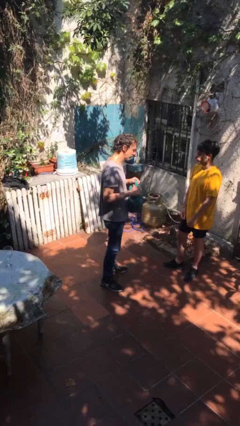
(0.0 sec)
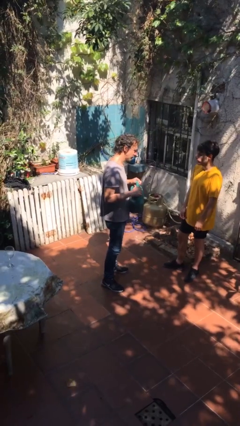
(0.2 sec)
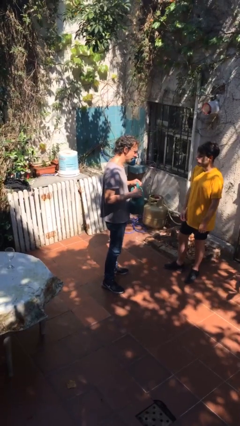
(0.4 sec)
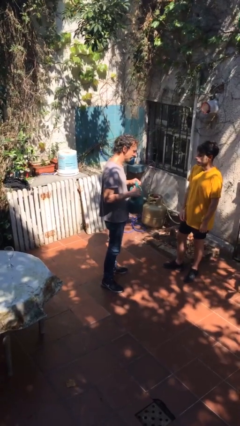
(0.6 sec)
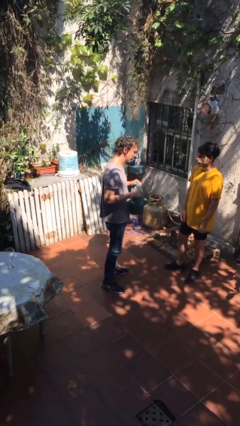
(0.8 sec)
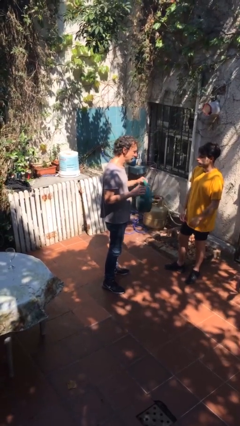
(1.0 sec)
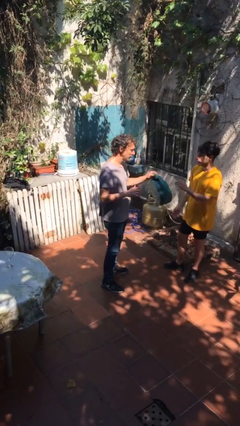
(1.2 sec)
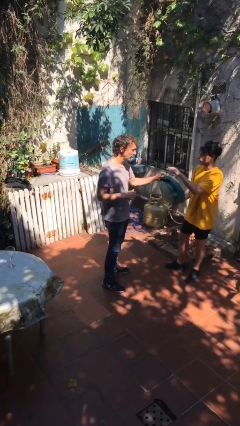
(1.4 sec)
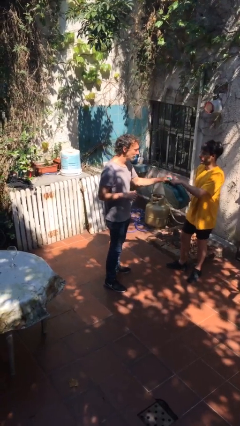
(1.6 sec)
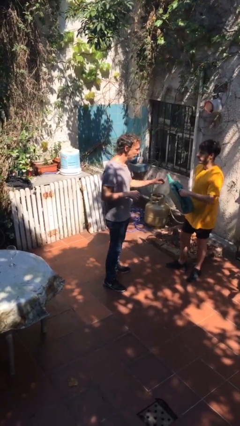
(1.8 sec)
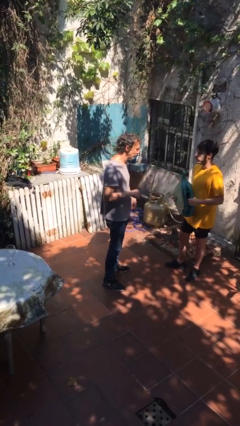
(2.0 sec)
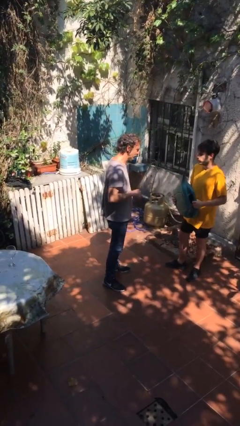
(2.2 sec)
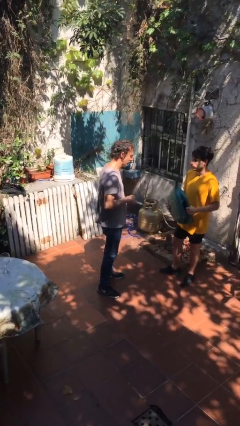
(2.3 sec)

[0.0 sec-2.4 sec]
person transfers object to person

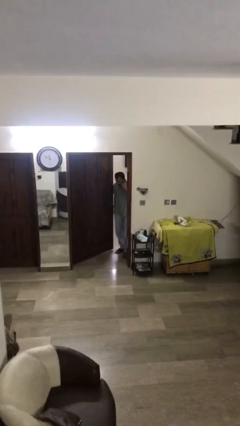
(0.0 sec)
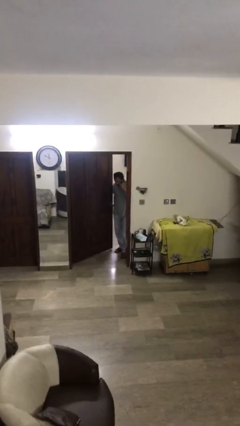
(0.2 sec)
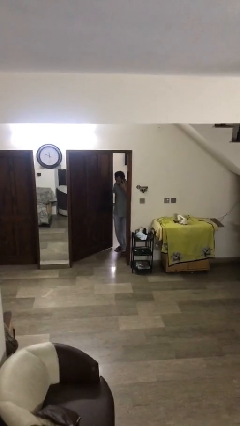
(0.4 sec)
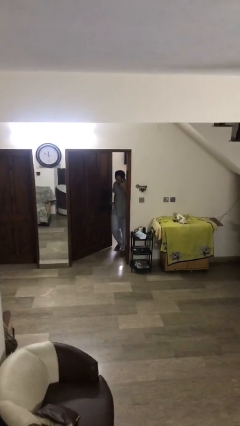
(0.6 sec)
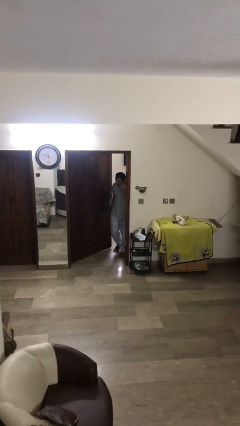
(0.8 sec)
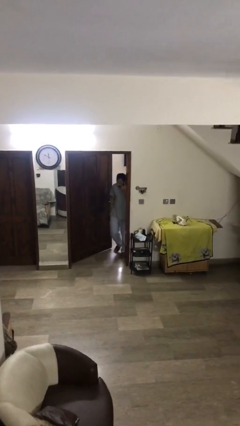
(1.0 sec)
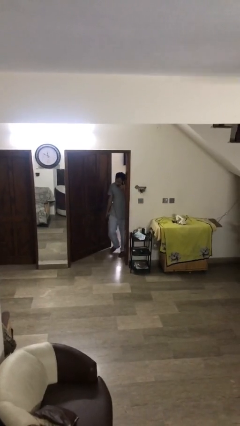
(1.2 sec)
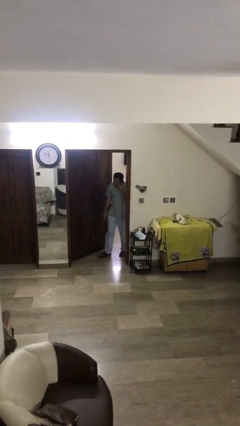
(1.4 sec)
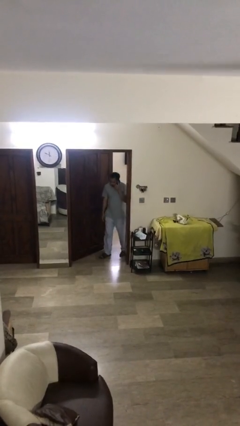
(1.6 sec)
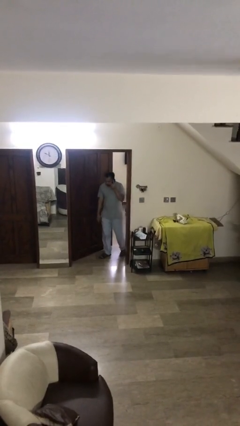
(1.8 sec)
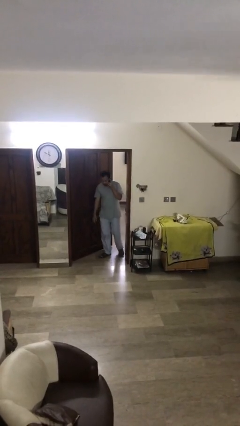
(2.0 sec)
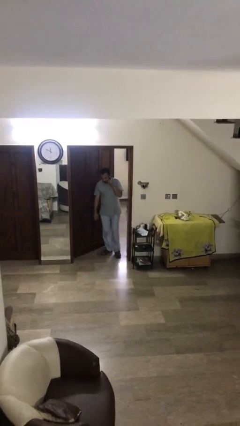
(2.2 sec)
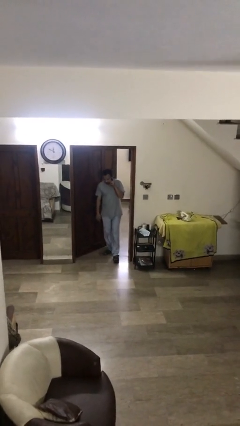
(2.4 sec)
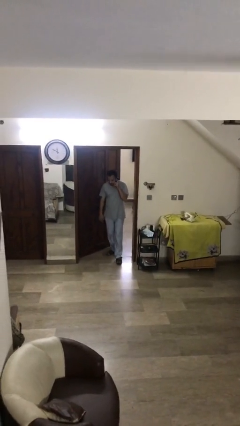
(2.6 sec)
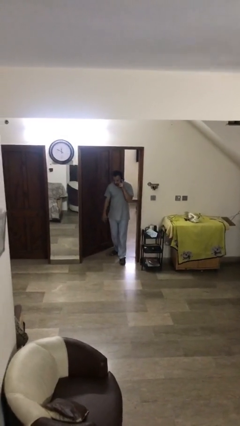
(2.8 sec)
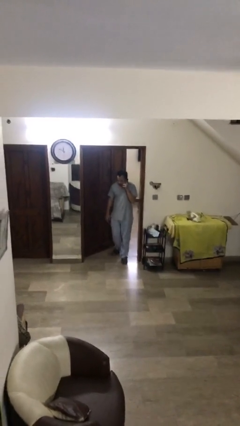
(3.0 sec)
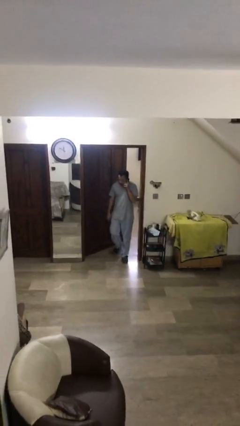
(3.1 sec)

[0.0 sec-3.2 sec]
person enters scene through structure

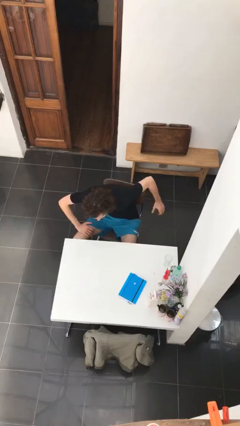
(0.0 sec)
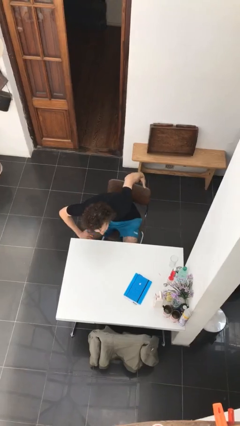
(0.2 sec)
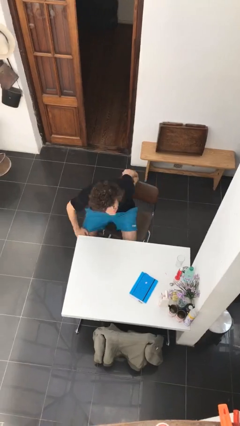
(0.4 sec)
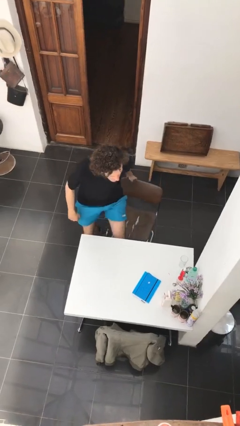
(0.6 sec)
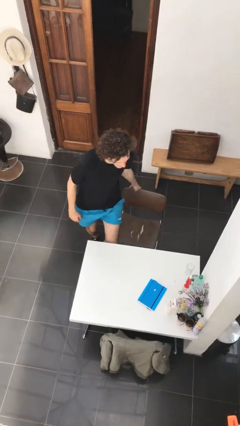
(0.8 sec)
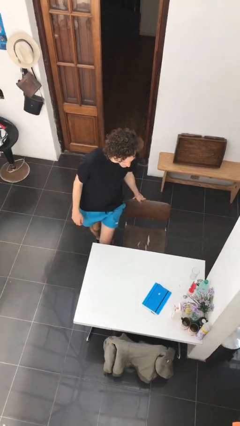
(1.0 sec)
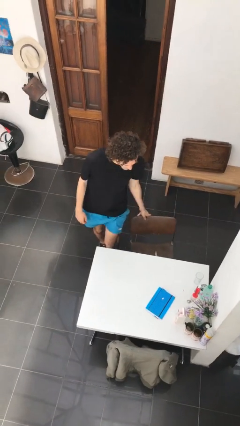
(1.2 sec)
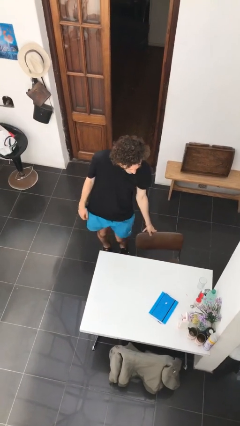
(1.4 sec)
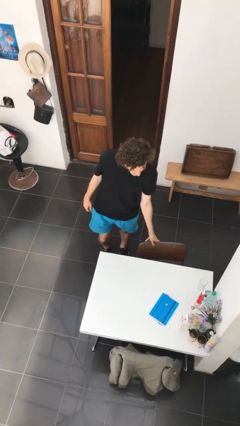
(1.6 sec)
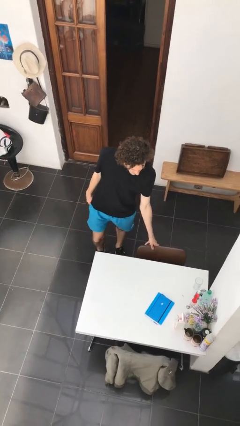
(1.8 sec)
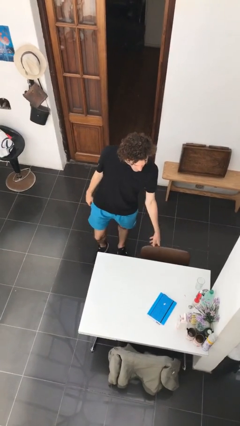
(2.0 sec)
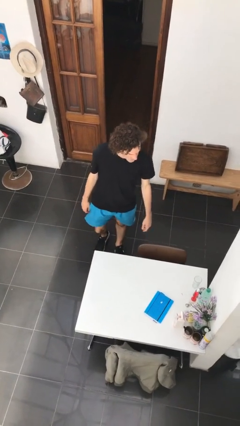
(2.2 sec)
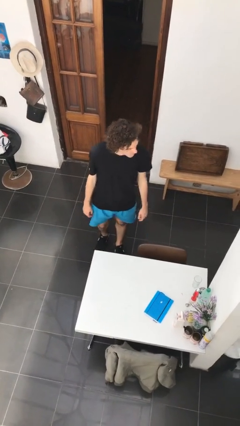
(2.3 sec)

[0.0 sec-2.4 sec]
person stands up

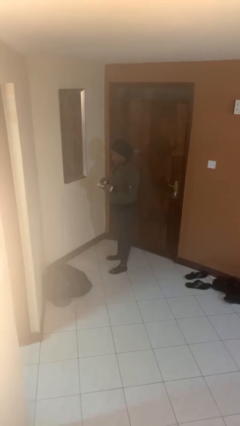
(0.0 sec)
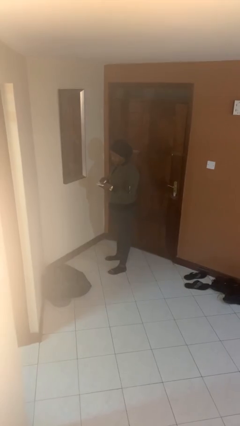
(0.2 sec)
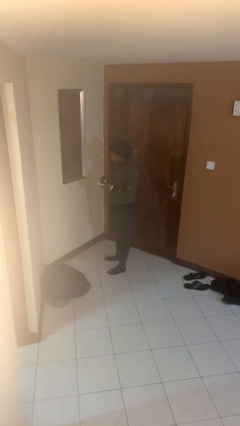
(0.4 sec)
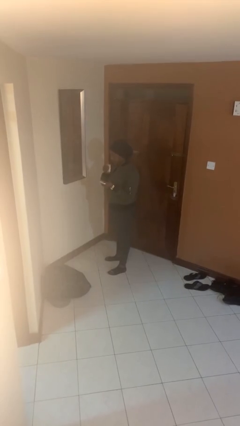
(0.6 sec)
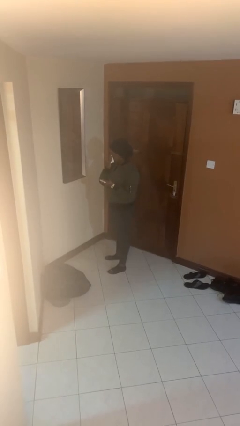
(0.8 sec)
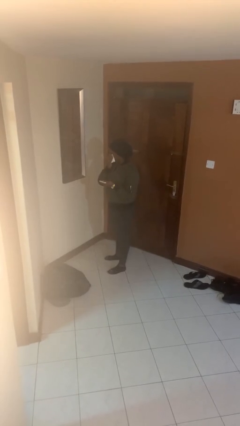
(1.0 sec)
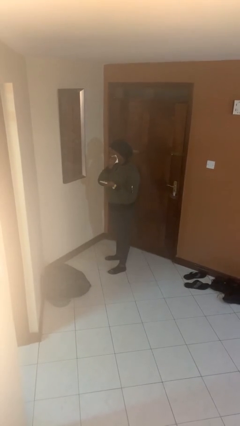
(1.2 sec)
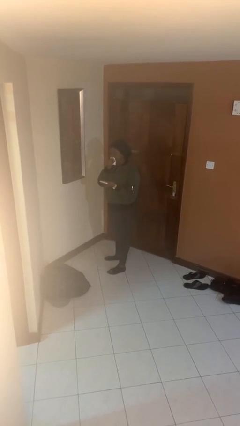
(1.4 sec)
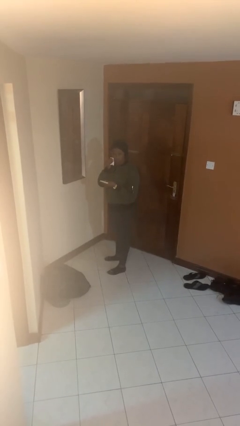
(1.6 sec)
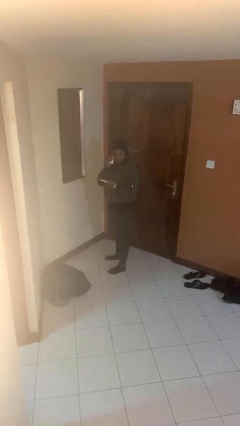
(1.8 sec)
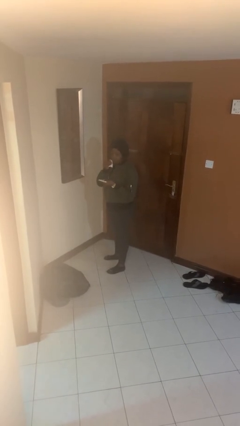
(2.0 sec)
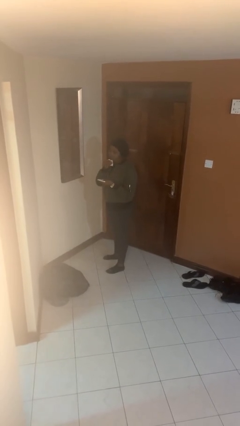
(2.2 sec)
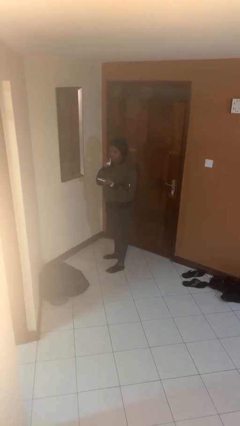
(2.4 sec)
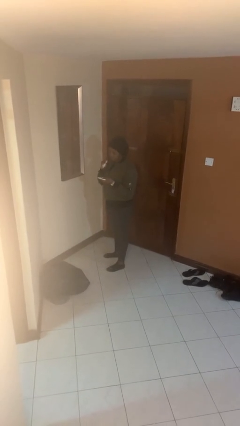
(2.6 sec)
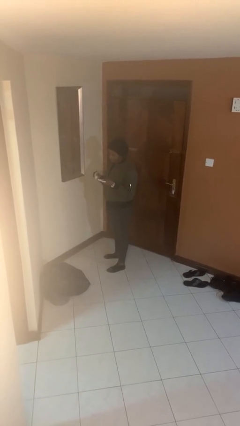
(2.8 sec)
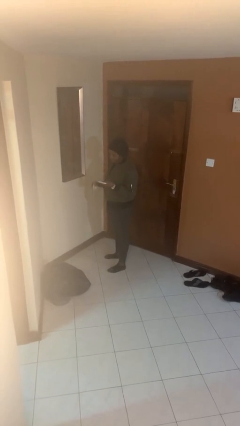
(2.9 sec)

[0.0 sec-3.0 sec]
person applies foundation makeup

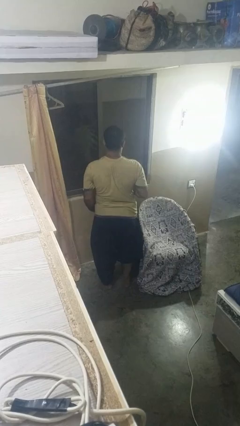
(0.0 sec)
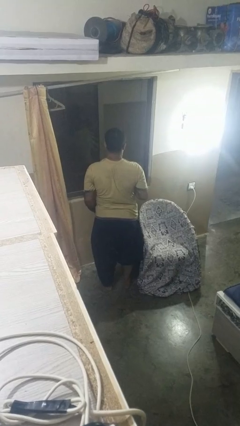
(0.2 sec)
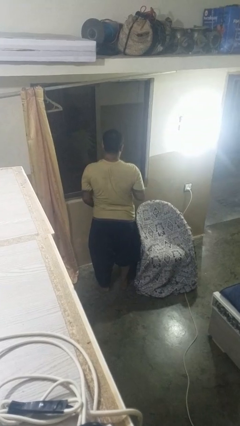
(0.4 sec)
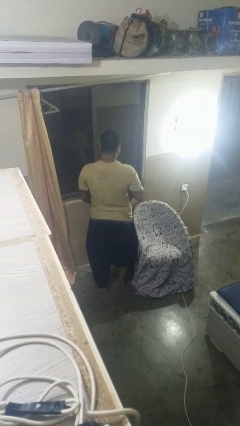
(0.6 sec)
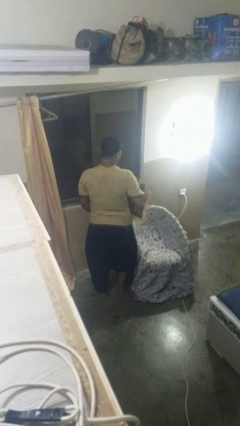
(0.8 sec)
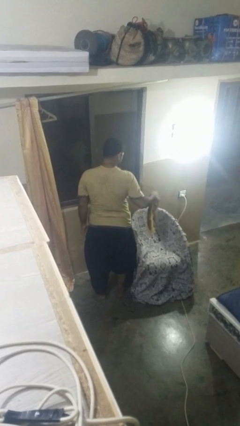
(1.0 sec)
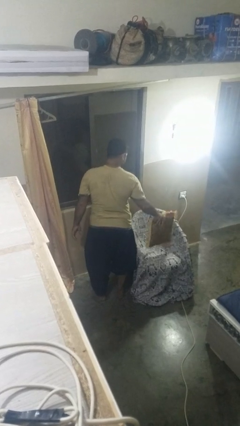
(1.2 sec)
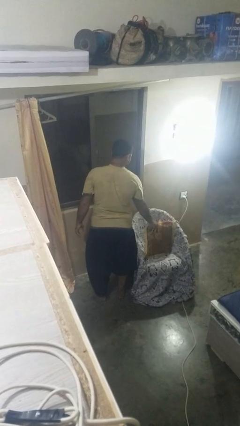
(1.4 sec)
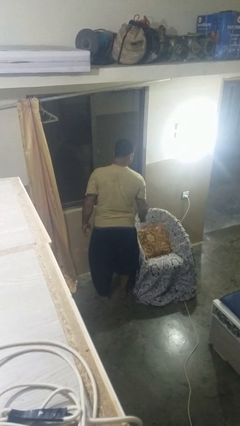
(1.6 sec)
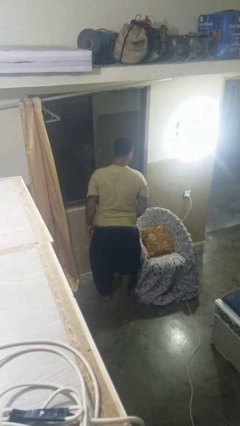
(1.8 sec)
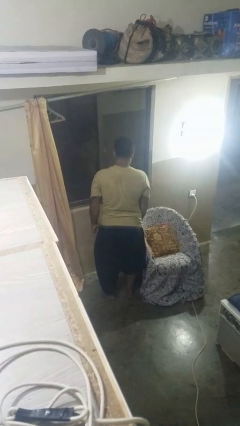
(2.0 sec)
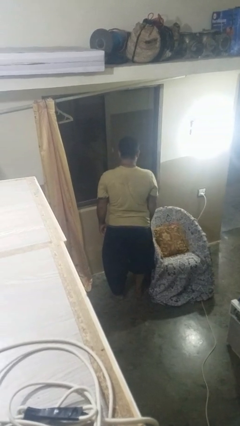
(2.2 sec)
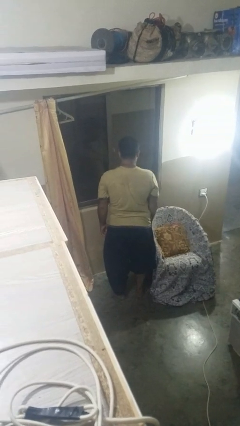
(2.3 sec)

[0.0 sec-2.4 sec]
person puts down object on couch

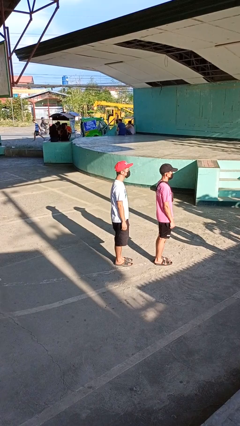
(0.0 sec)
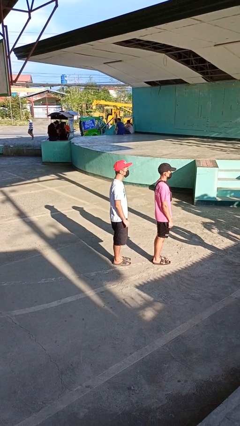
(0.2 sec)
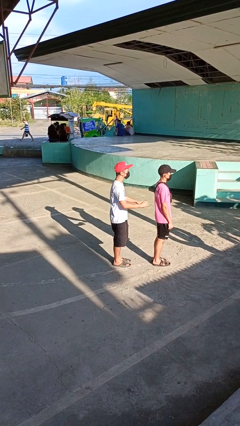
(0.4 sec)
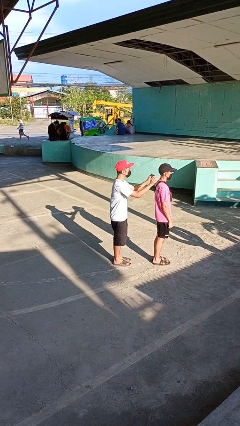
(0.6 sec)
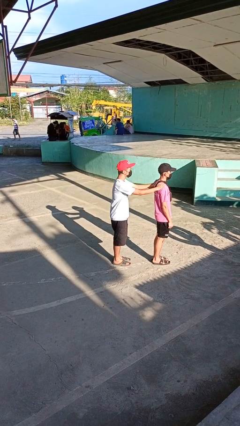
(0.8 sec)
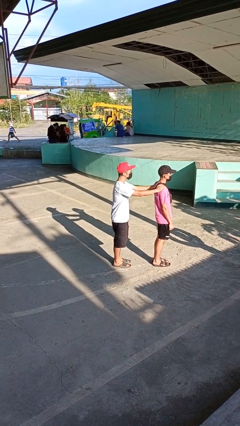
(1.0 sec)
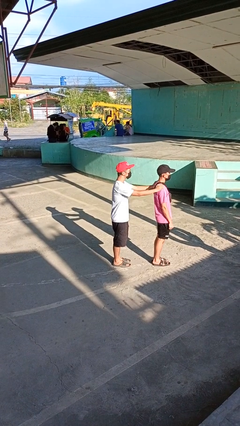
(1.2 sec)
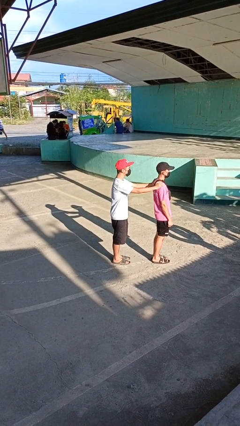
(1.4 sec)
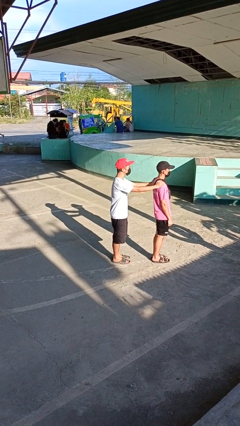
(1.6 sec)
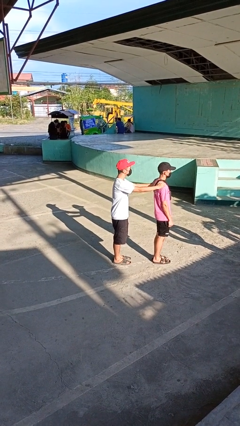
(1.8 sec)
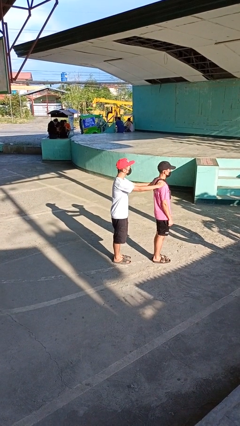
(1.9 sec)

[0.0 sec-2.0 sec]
person grabs person by shoulder

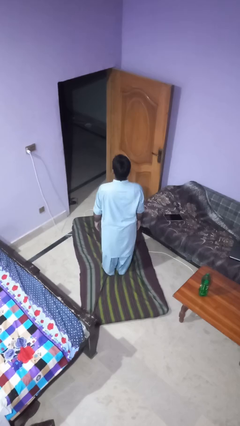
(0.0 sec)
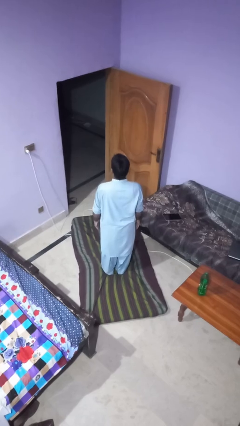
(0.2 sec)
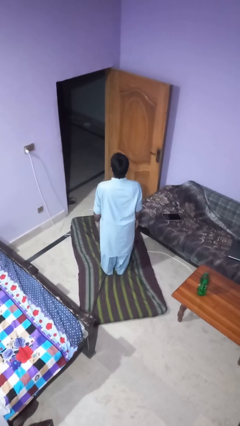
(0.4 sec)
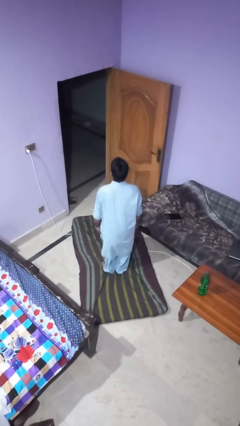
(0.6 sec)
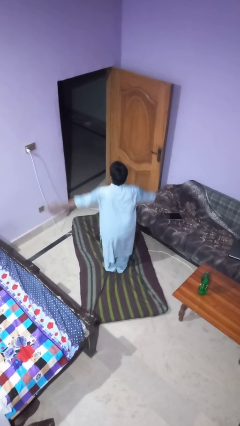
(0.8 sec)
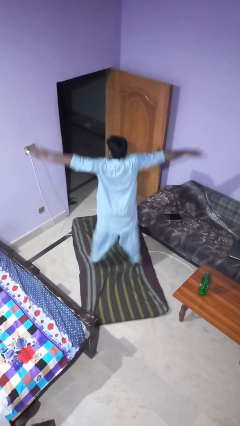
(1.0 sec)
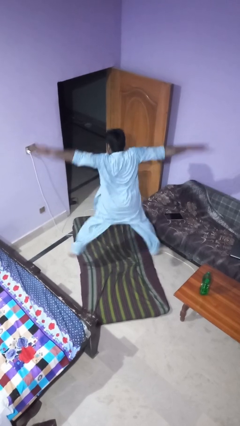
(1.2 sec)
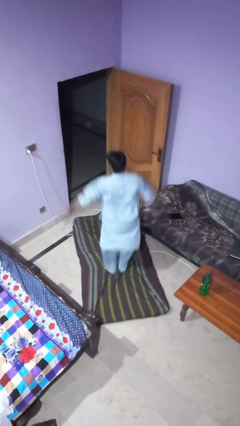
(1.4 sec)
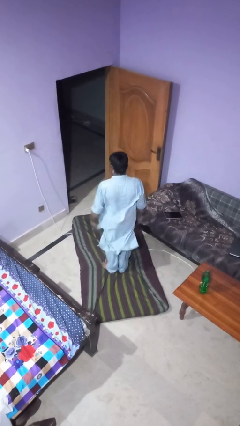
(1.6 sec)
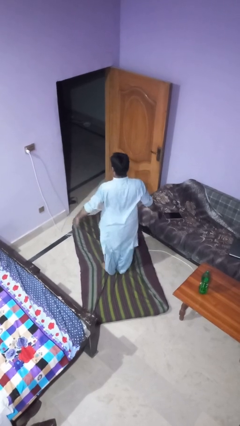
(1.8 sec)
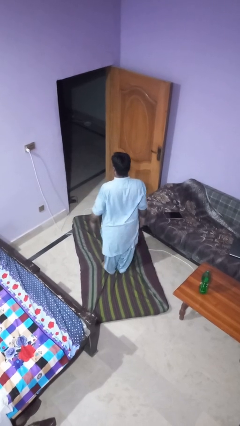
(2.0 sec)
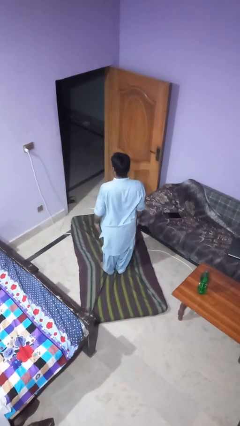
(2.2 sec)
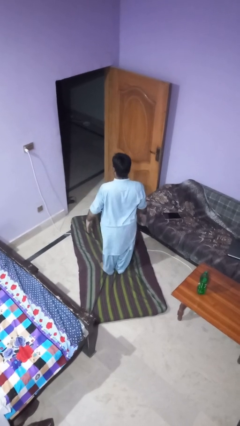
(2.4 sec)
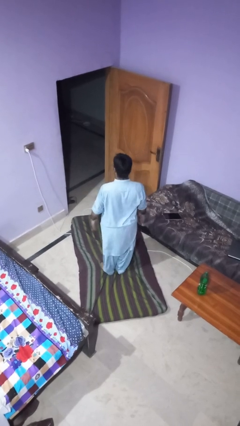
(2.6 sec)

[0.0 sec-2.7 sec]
person exercises with jumping jacks
